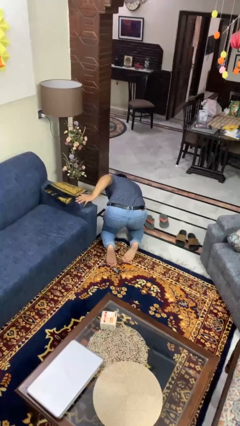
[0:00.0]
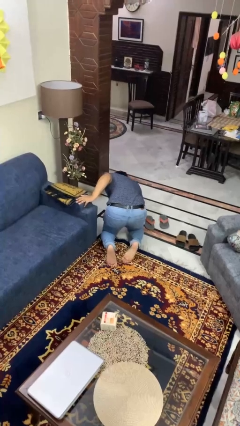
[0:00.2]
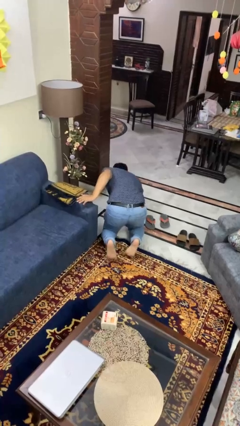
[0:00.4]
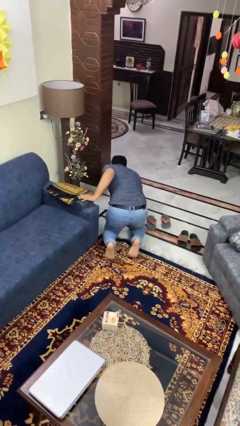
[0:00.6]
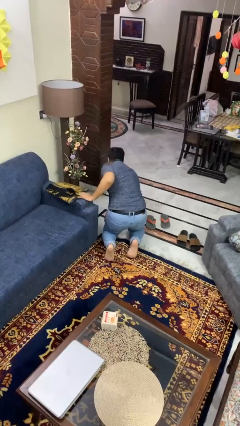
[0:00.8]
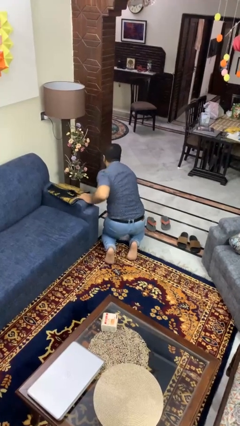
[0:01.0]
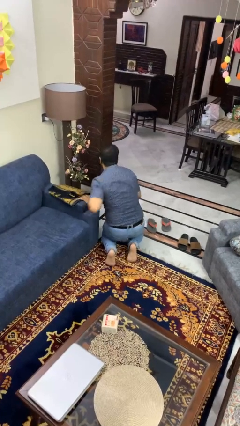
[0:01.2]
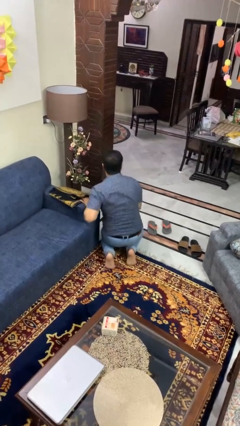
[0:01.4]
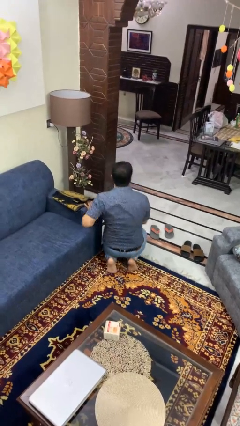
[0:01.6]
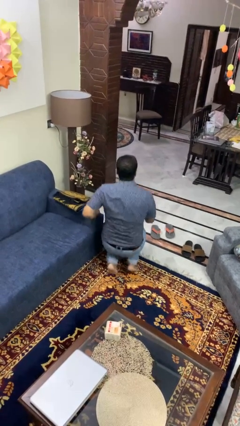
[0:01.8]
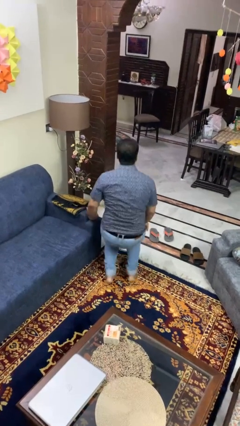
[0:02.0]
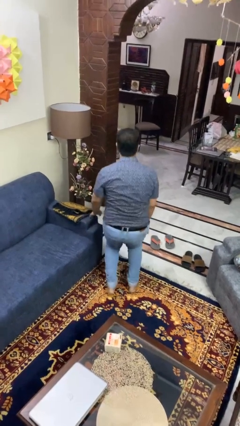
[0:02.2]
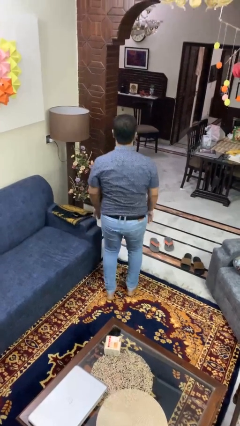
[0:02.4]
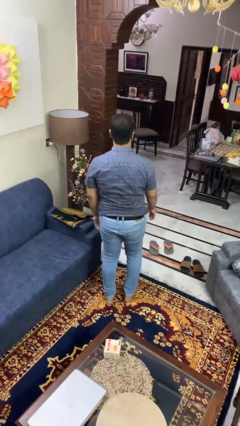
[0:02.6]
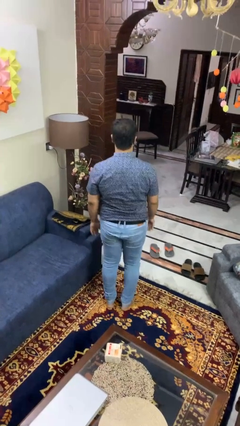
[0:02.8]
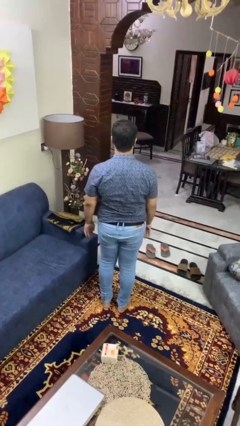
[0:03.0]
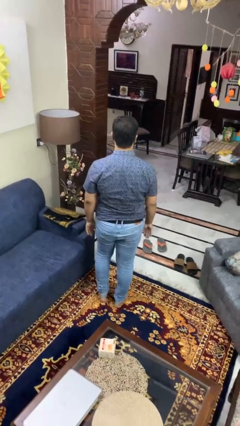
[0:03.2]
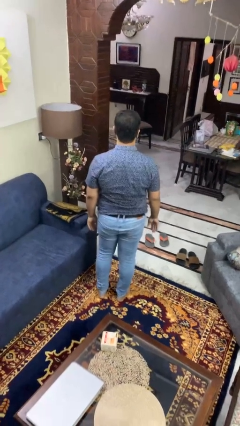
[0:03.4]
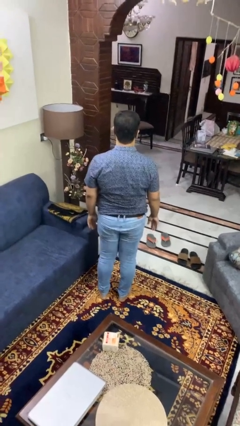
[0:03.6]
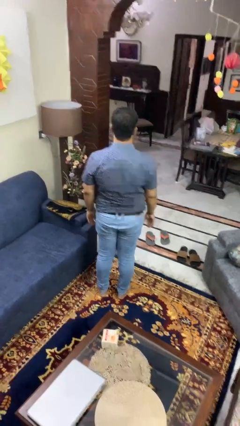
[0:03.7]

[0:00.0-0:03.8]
person stands up from floor

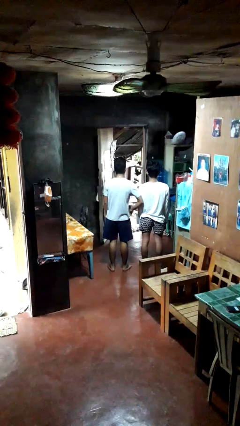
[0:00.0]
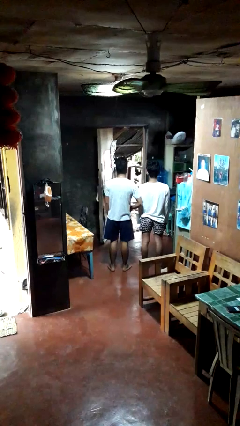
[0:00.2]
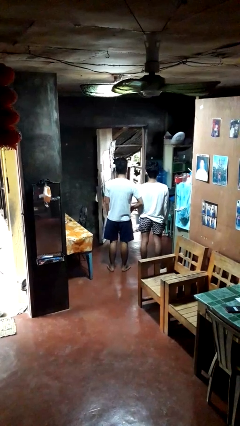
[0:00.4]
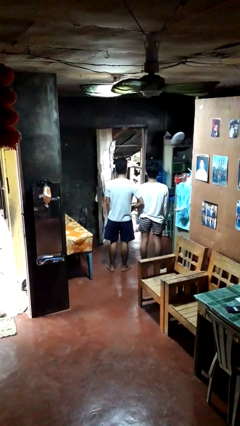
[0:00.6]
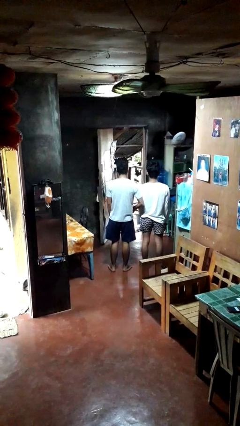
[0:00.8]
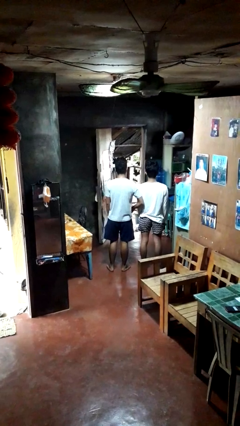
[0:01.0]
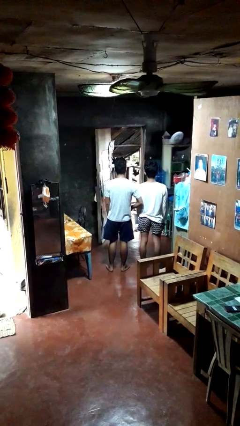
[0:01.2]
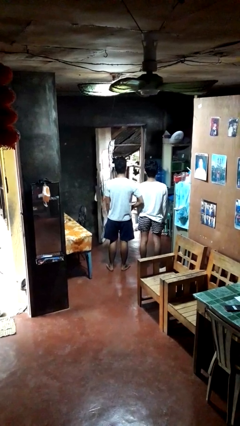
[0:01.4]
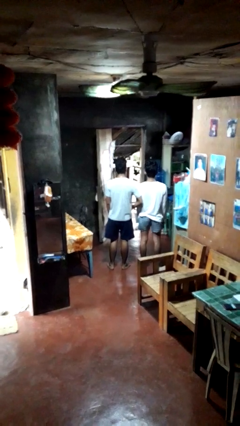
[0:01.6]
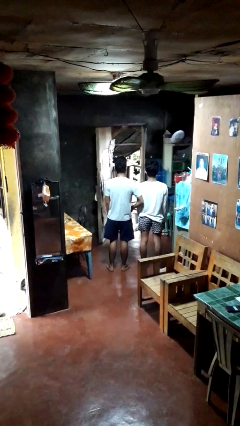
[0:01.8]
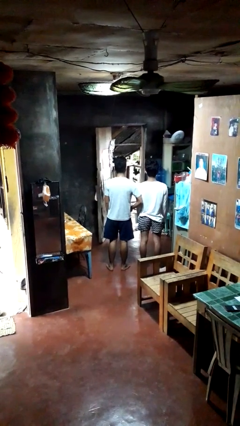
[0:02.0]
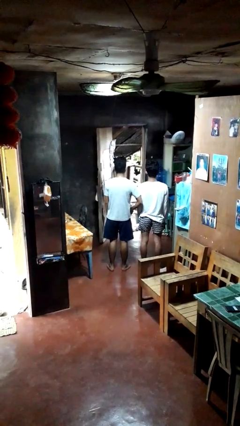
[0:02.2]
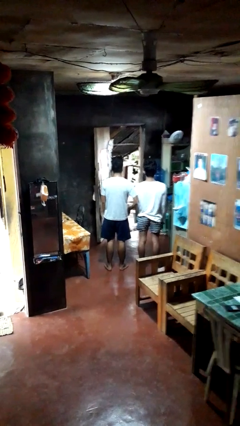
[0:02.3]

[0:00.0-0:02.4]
person nudges person with elbow

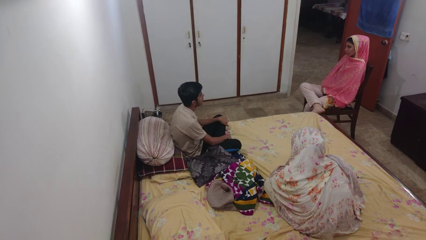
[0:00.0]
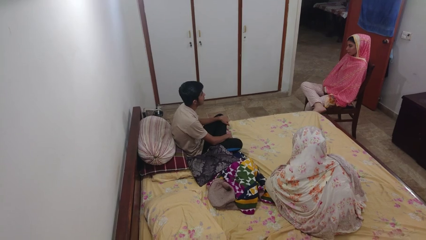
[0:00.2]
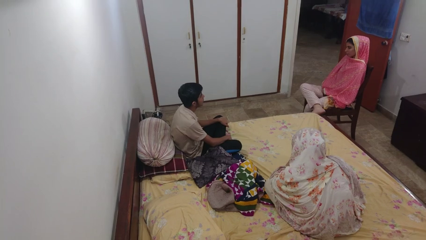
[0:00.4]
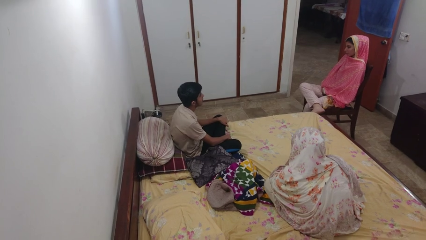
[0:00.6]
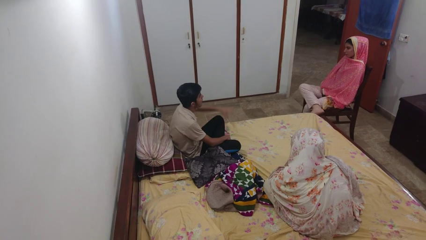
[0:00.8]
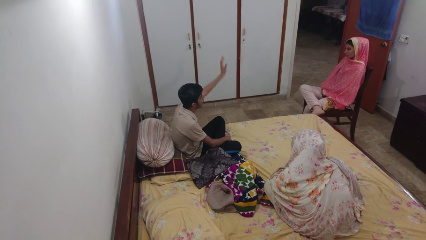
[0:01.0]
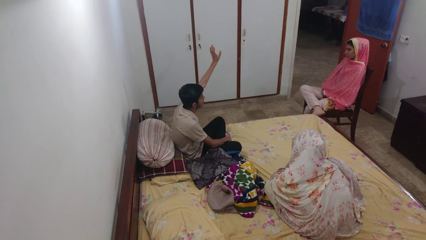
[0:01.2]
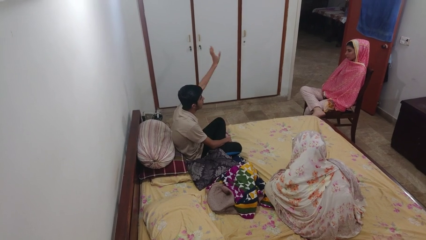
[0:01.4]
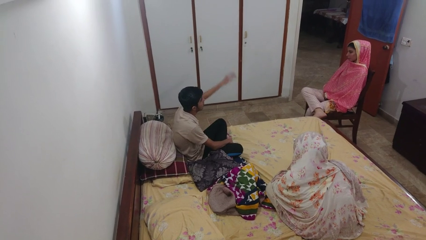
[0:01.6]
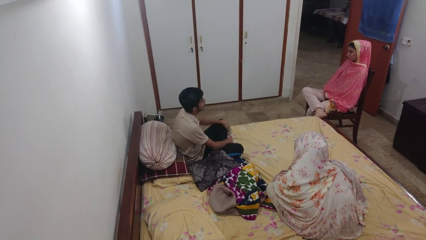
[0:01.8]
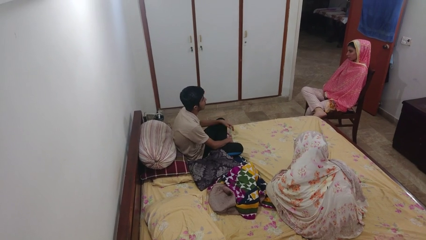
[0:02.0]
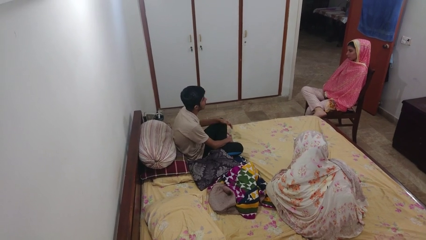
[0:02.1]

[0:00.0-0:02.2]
person waves at person

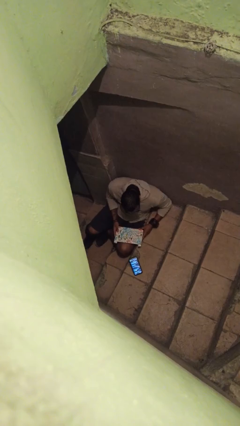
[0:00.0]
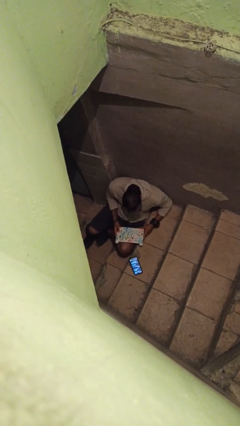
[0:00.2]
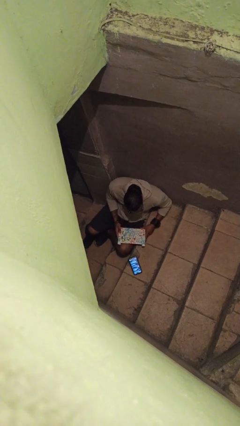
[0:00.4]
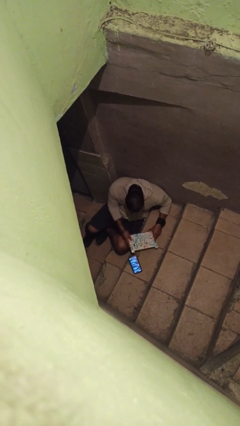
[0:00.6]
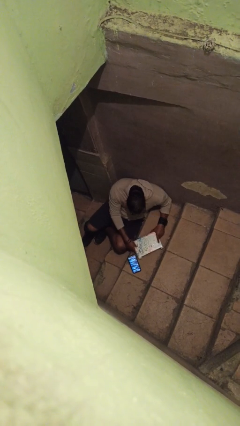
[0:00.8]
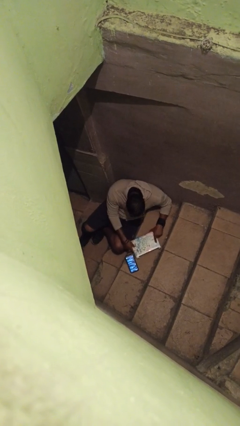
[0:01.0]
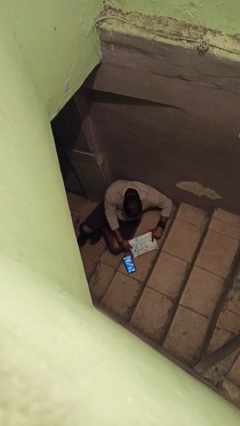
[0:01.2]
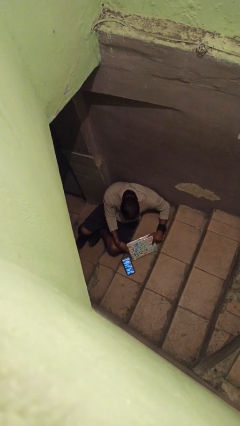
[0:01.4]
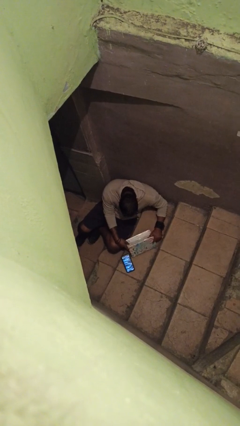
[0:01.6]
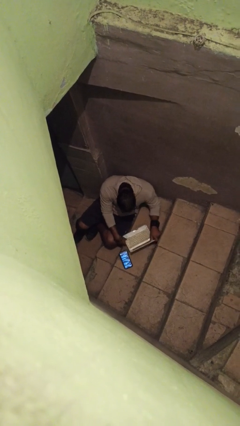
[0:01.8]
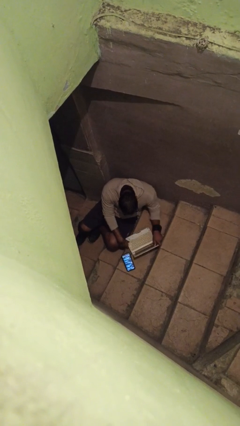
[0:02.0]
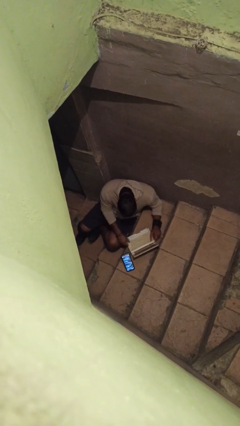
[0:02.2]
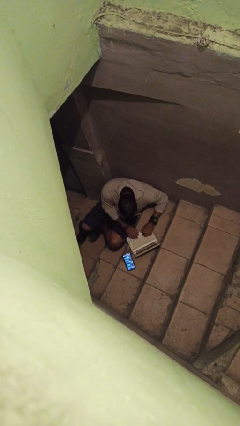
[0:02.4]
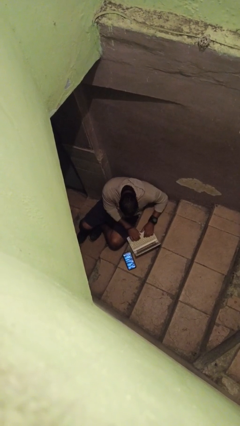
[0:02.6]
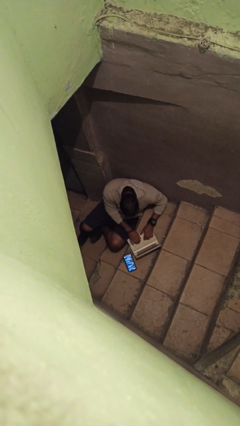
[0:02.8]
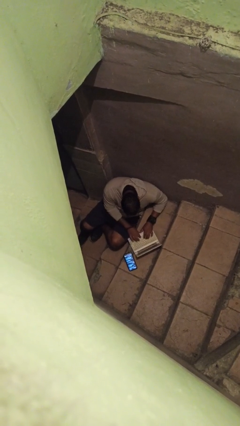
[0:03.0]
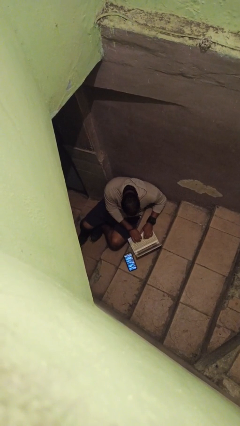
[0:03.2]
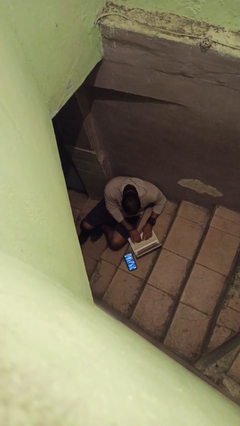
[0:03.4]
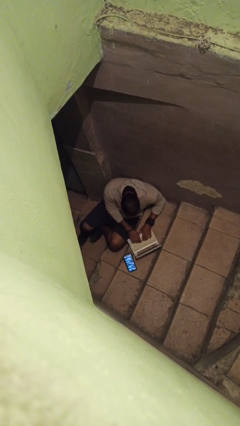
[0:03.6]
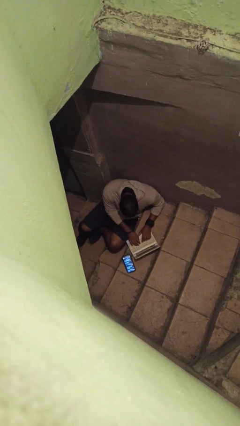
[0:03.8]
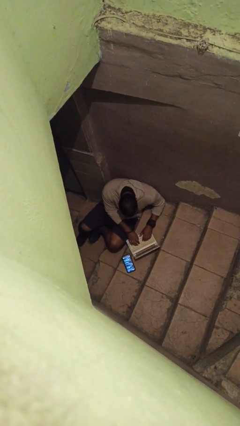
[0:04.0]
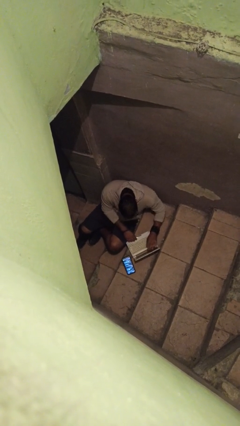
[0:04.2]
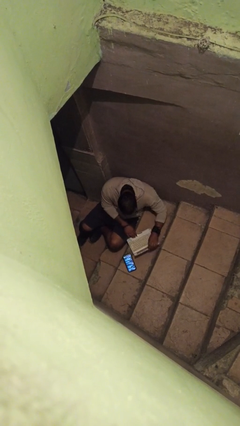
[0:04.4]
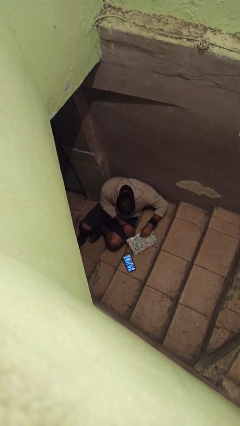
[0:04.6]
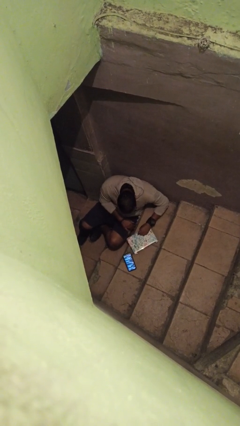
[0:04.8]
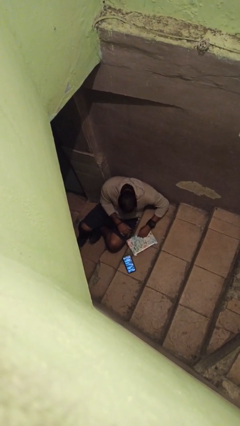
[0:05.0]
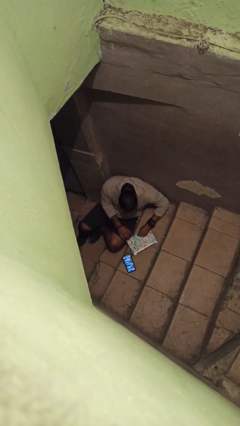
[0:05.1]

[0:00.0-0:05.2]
person interacts with laptop

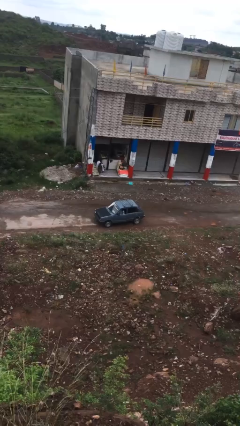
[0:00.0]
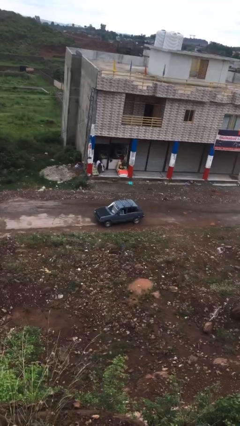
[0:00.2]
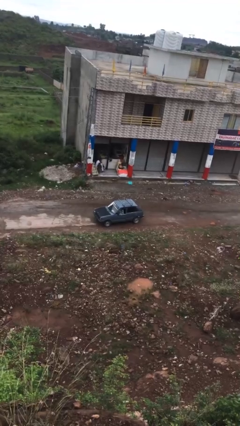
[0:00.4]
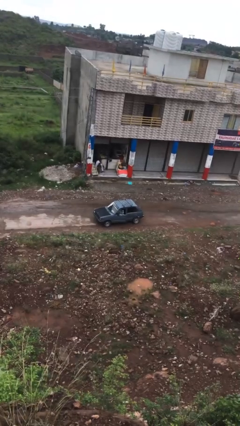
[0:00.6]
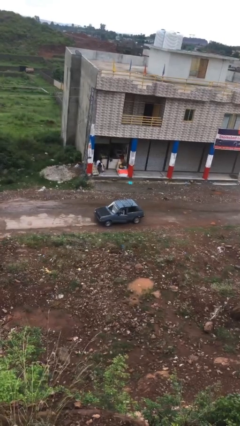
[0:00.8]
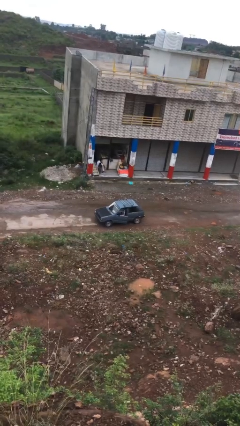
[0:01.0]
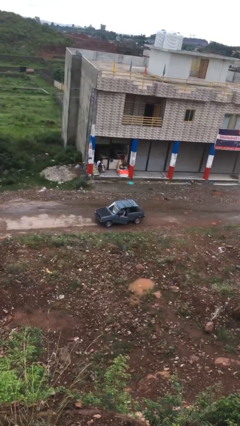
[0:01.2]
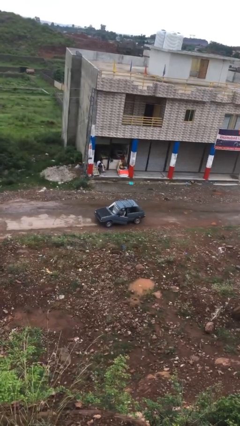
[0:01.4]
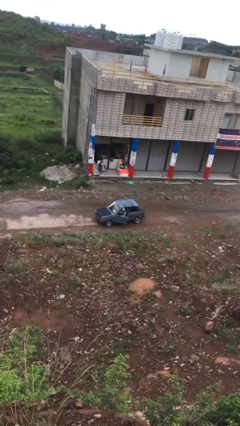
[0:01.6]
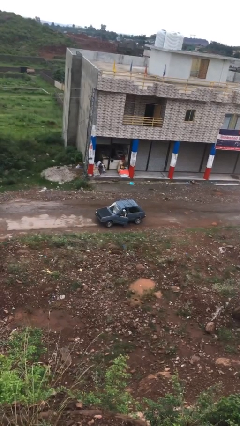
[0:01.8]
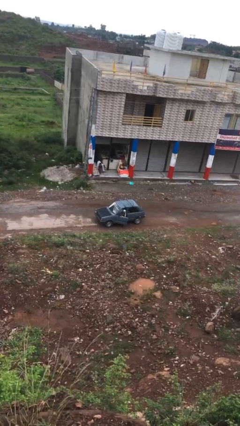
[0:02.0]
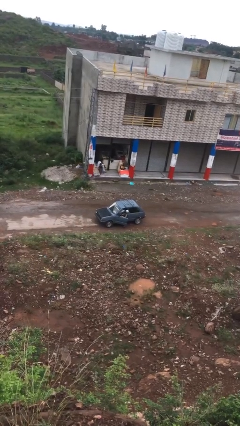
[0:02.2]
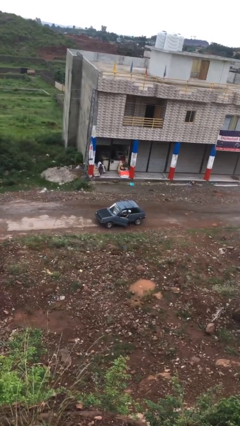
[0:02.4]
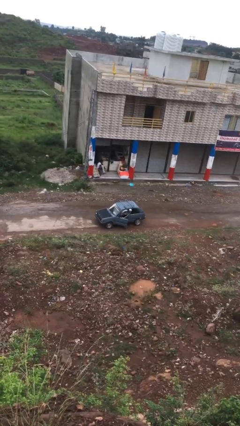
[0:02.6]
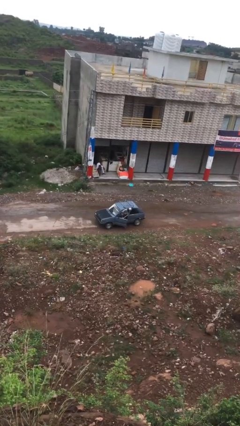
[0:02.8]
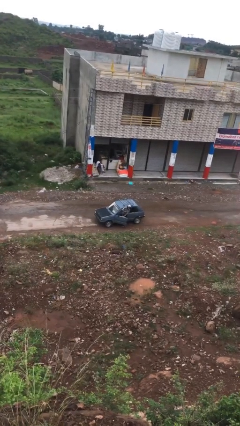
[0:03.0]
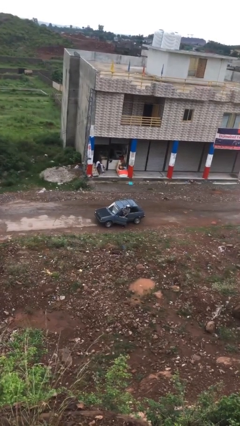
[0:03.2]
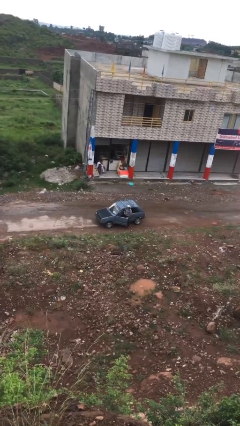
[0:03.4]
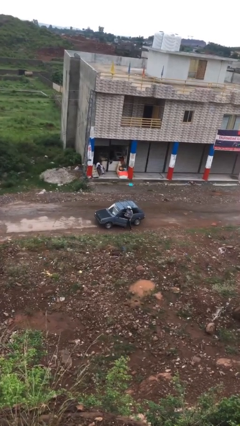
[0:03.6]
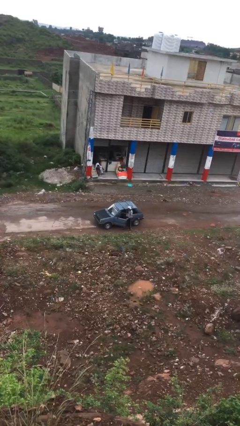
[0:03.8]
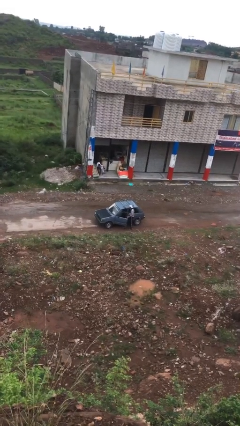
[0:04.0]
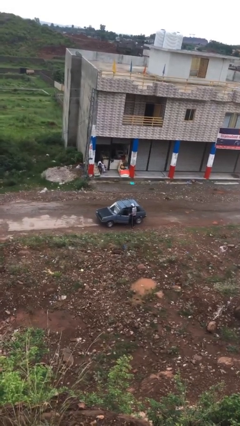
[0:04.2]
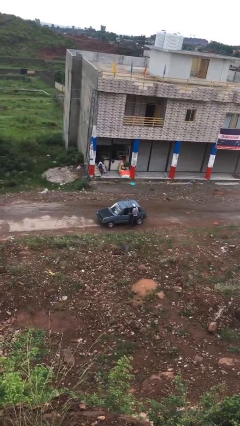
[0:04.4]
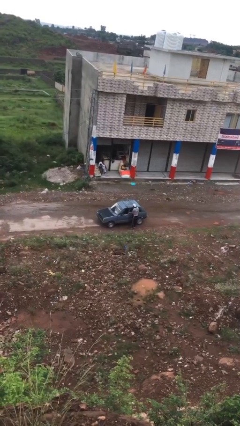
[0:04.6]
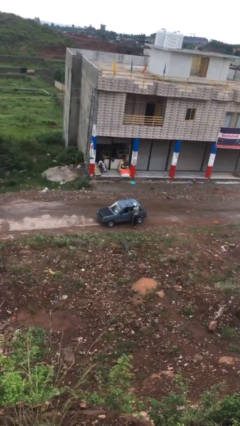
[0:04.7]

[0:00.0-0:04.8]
car drops off person
